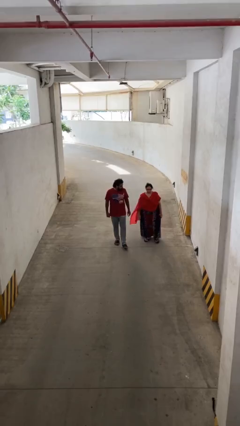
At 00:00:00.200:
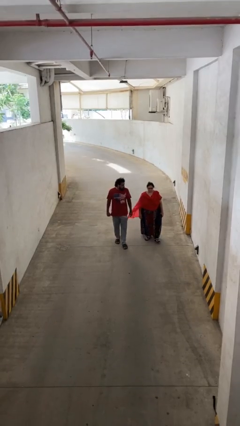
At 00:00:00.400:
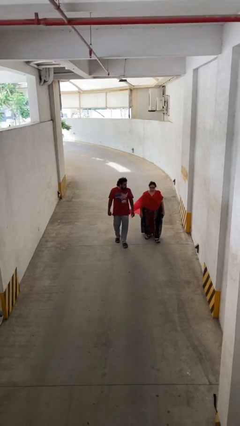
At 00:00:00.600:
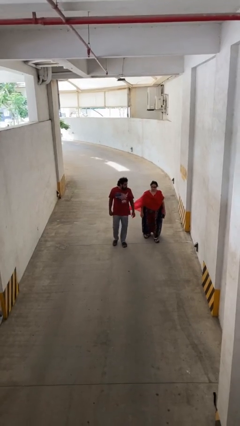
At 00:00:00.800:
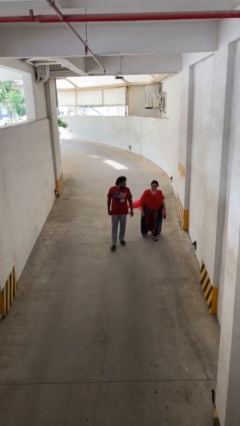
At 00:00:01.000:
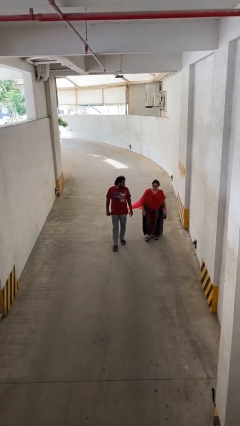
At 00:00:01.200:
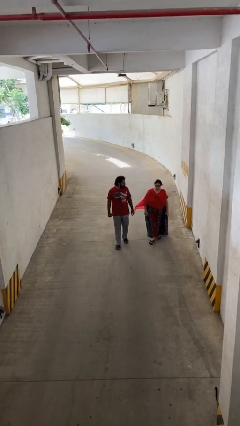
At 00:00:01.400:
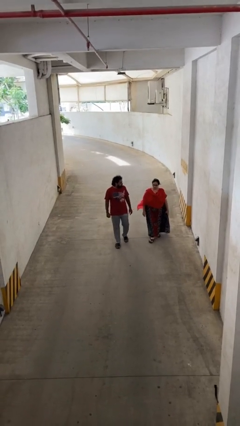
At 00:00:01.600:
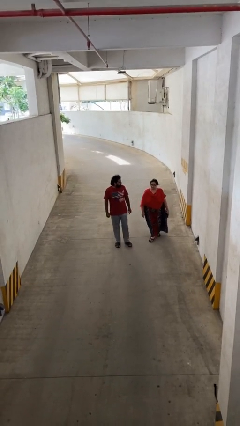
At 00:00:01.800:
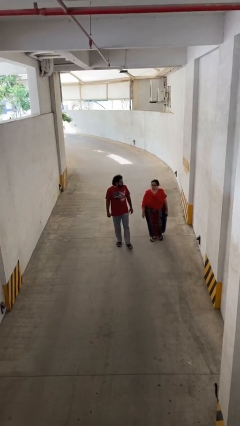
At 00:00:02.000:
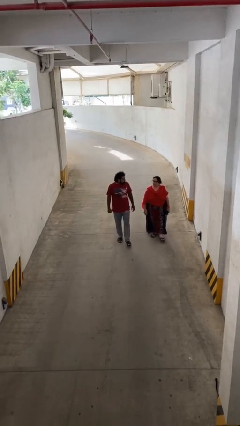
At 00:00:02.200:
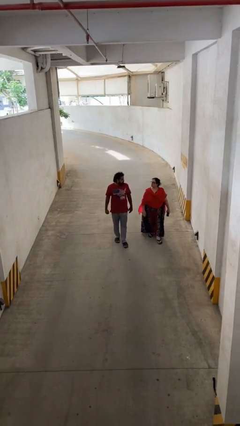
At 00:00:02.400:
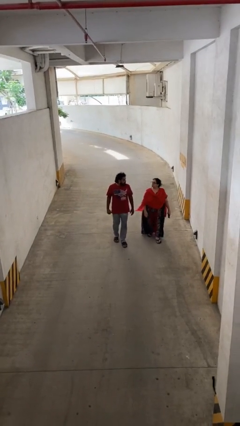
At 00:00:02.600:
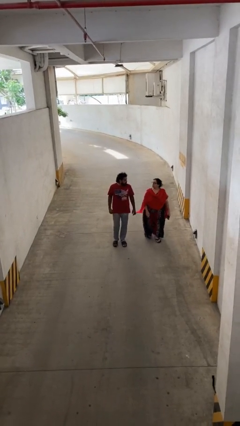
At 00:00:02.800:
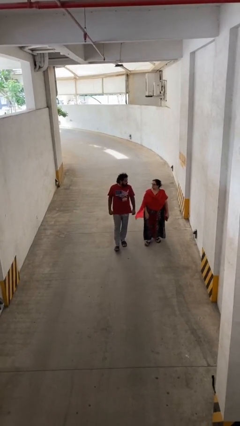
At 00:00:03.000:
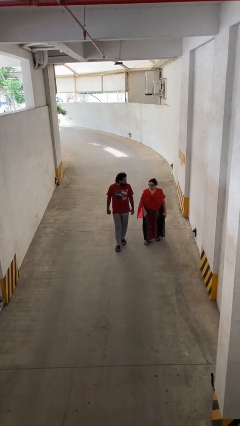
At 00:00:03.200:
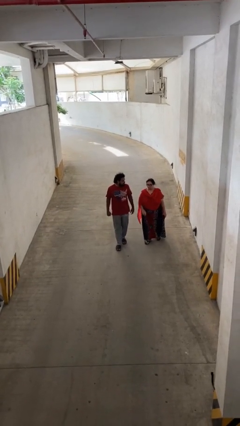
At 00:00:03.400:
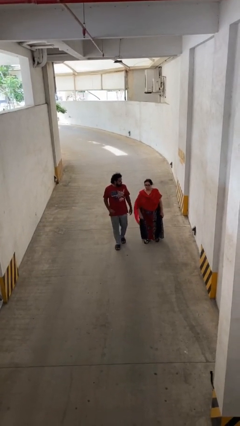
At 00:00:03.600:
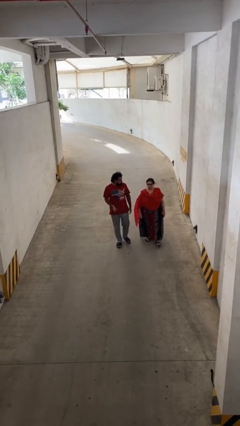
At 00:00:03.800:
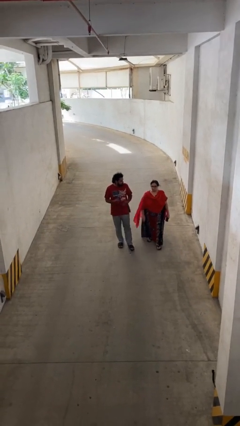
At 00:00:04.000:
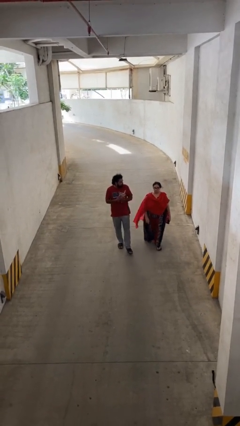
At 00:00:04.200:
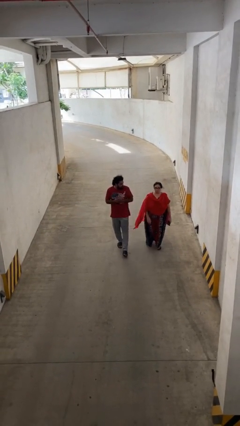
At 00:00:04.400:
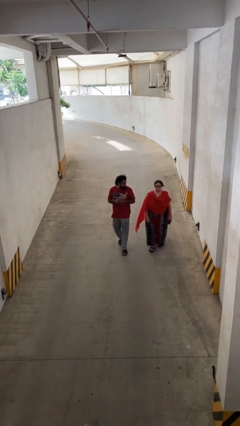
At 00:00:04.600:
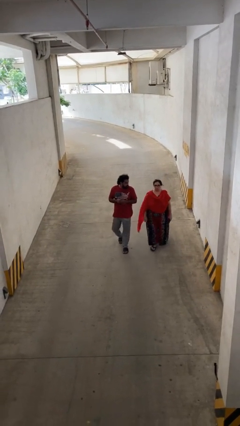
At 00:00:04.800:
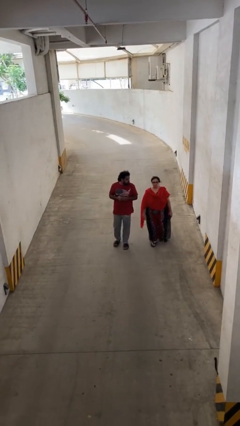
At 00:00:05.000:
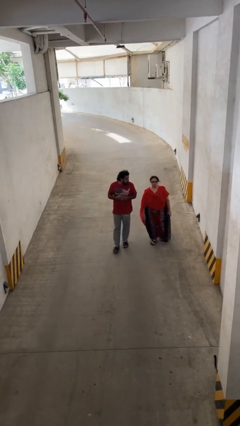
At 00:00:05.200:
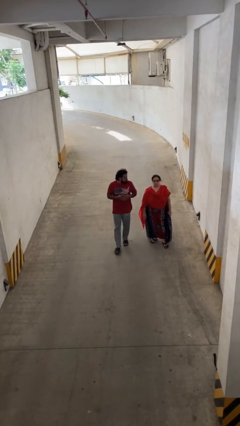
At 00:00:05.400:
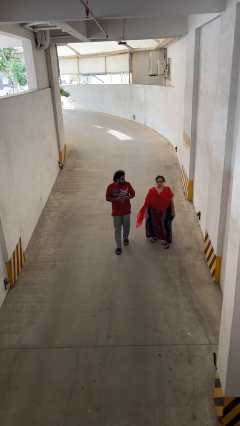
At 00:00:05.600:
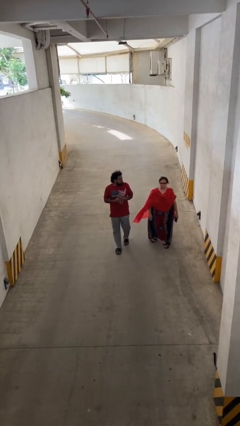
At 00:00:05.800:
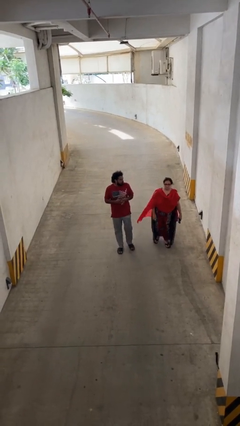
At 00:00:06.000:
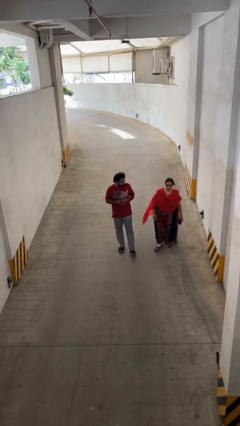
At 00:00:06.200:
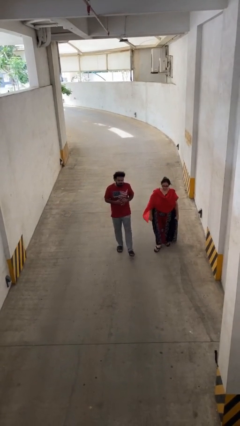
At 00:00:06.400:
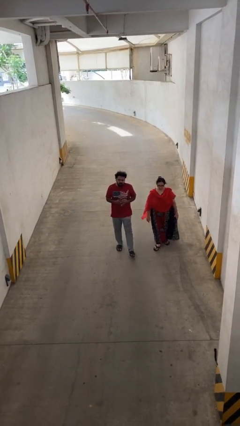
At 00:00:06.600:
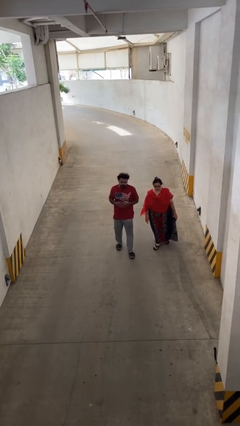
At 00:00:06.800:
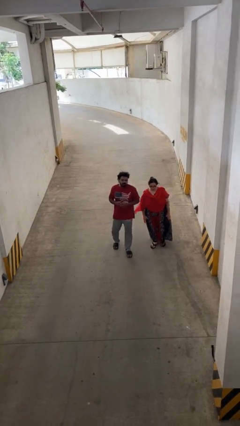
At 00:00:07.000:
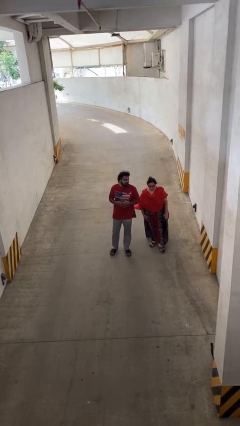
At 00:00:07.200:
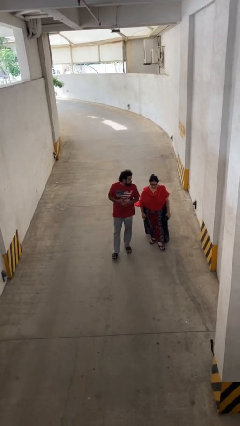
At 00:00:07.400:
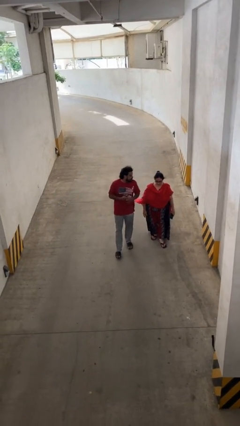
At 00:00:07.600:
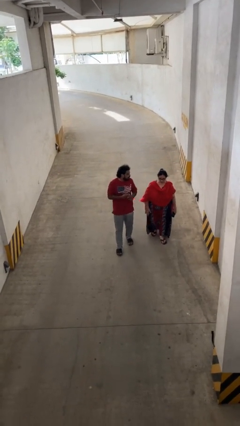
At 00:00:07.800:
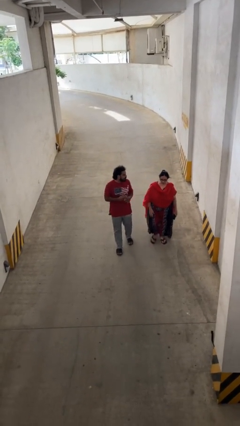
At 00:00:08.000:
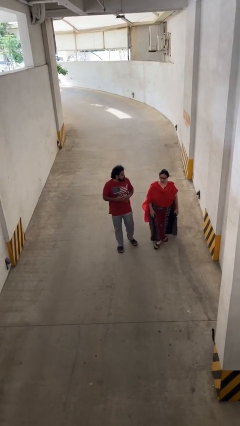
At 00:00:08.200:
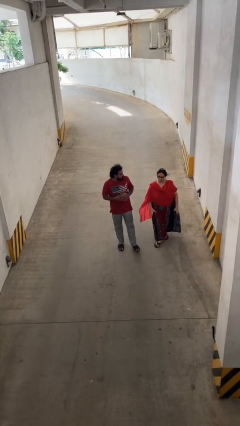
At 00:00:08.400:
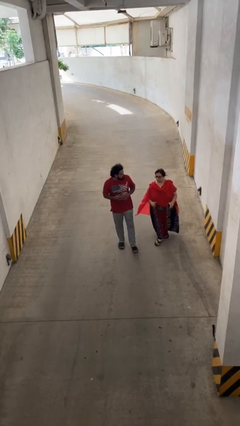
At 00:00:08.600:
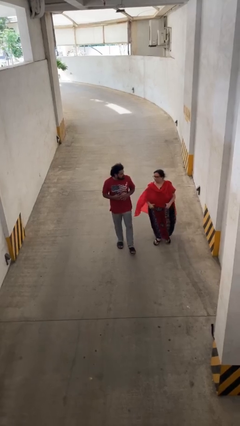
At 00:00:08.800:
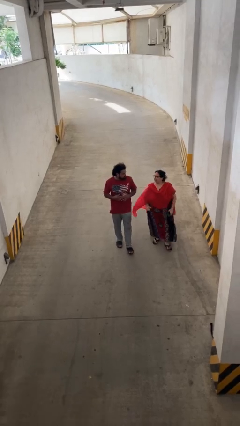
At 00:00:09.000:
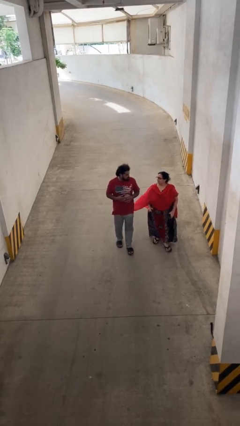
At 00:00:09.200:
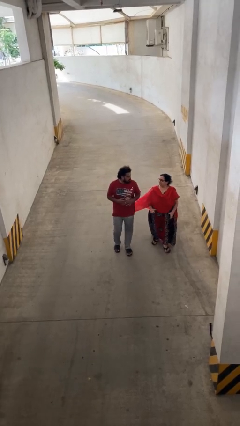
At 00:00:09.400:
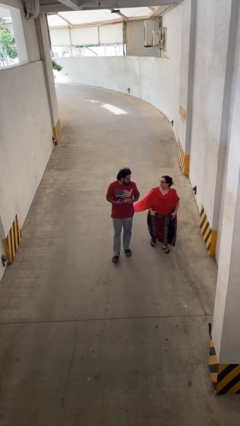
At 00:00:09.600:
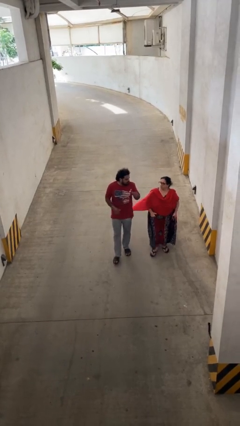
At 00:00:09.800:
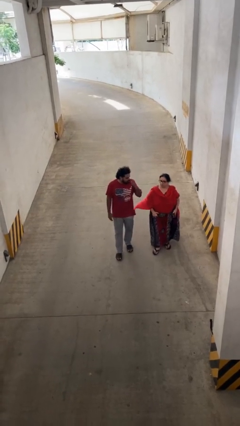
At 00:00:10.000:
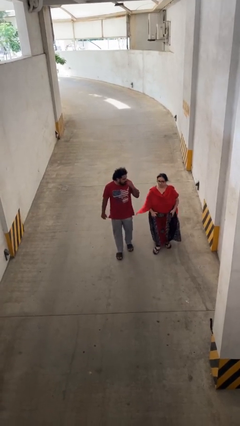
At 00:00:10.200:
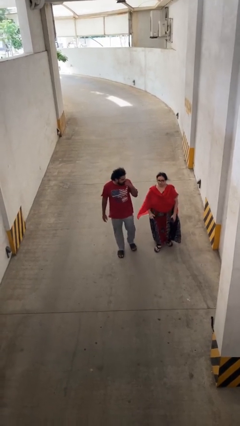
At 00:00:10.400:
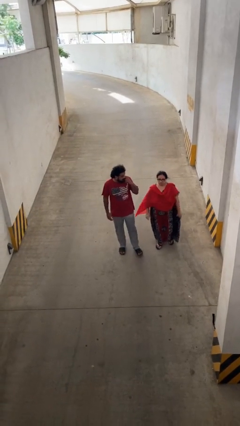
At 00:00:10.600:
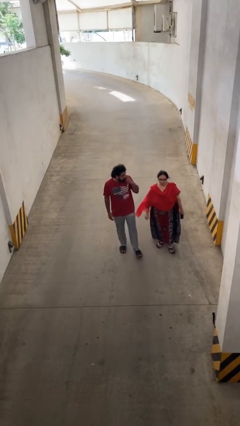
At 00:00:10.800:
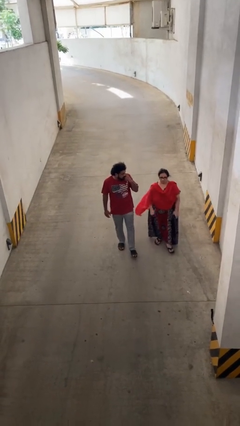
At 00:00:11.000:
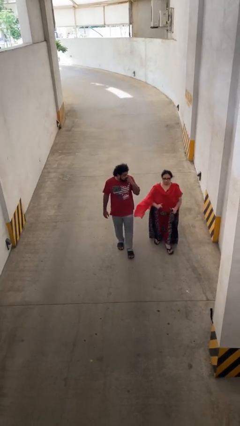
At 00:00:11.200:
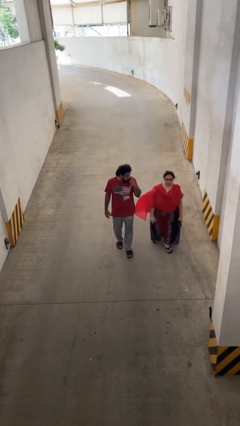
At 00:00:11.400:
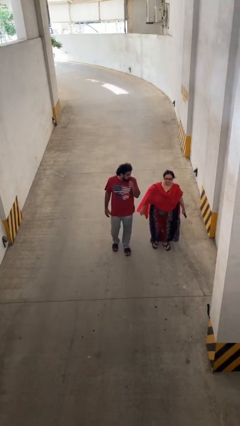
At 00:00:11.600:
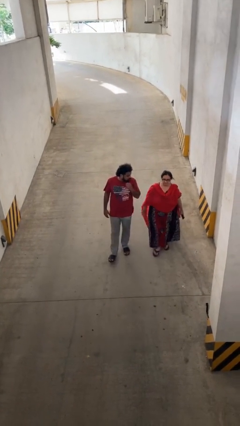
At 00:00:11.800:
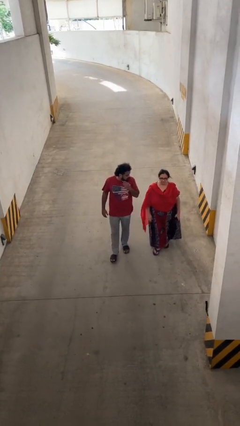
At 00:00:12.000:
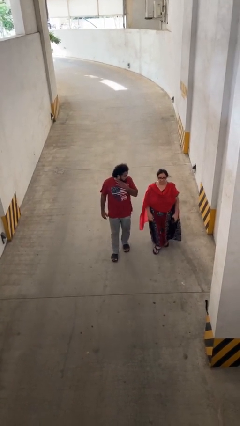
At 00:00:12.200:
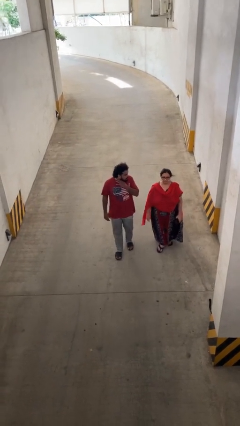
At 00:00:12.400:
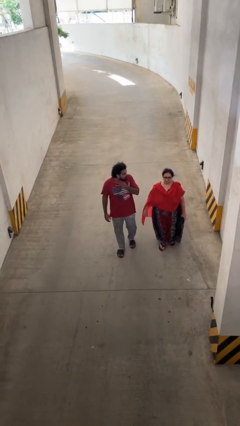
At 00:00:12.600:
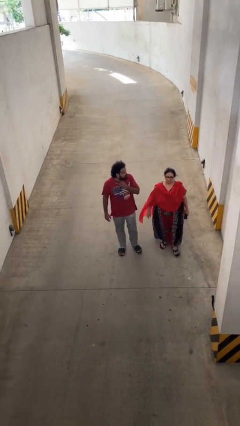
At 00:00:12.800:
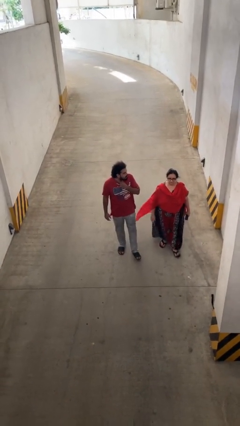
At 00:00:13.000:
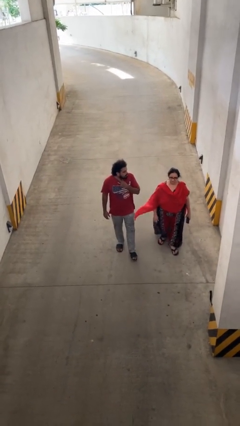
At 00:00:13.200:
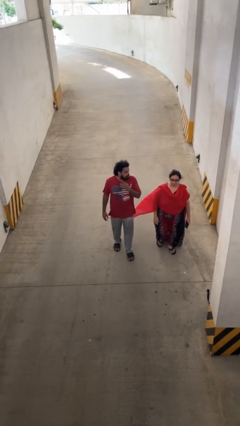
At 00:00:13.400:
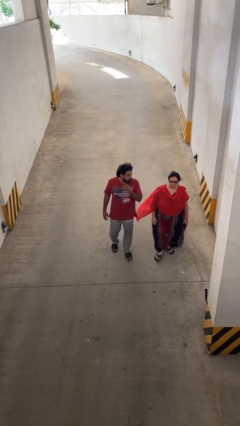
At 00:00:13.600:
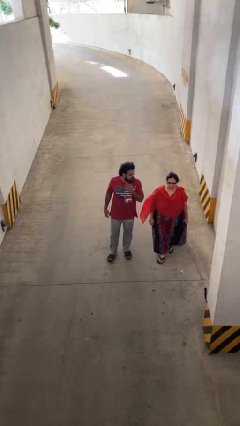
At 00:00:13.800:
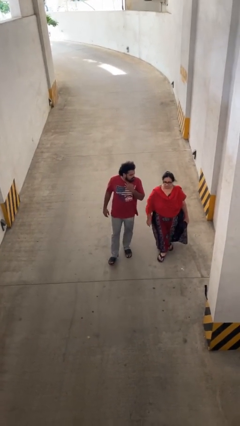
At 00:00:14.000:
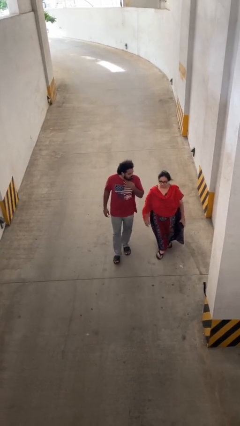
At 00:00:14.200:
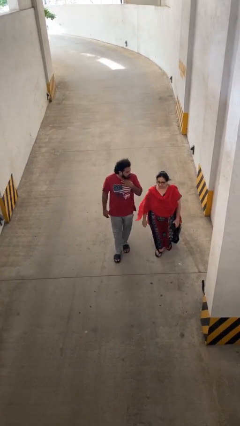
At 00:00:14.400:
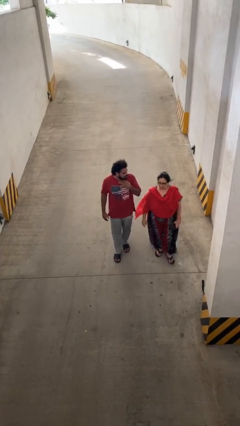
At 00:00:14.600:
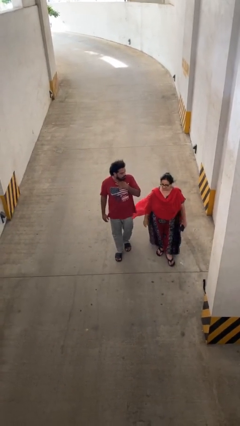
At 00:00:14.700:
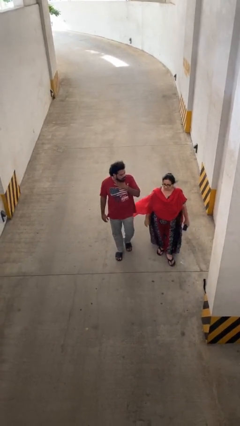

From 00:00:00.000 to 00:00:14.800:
person talks to person

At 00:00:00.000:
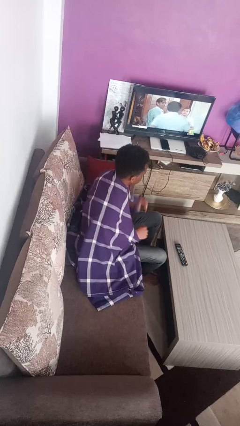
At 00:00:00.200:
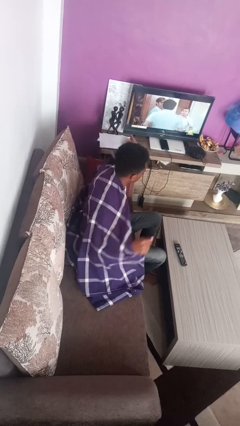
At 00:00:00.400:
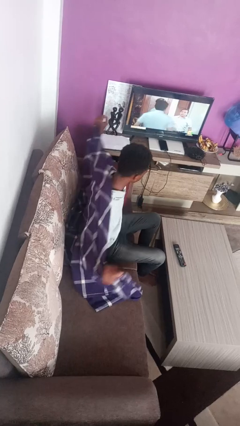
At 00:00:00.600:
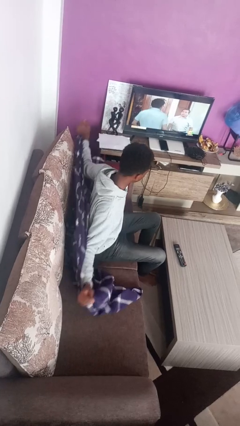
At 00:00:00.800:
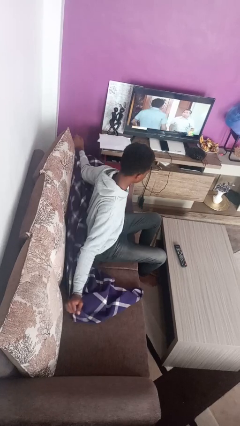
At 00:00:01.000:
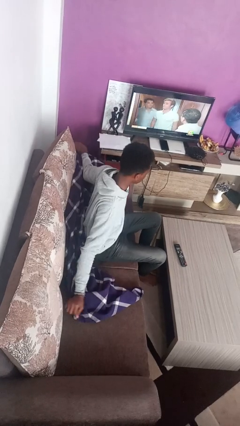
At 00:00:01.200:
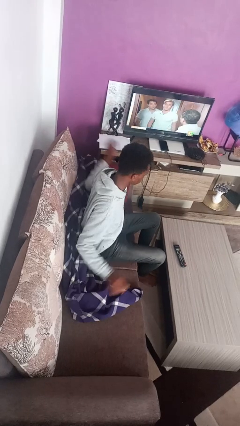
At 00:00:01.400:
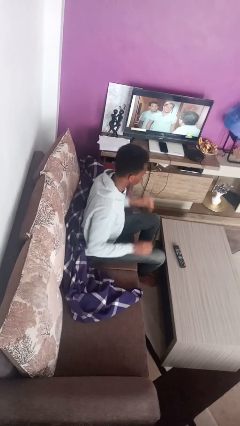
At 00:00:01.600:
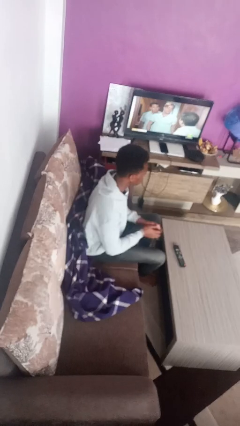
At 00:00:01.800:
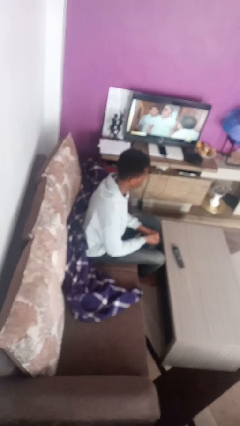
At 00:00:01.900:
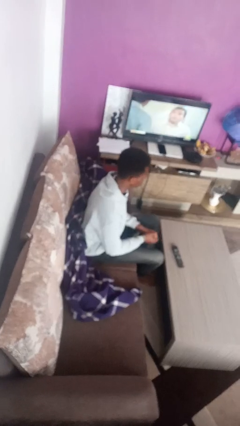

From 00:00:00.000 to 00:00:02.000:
person uncovers with blanket

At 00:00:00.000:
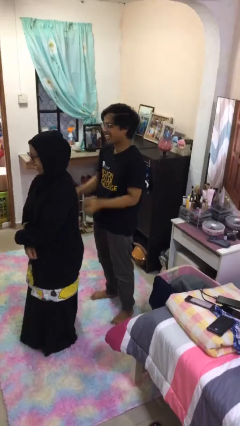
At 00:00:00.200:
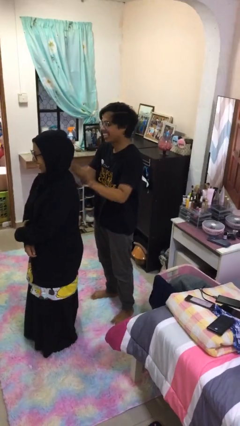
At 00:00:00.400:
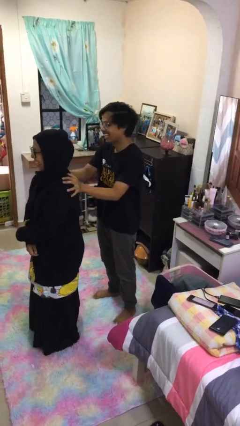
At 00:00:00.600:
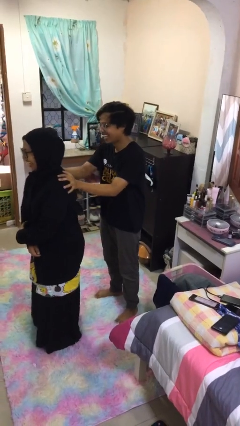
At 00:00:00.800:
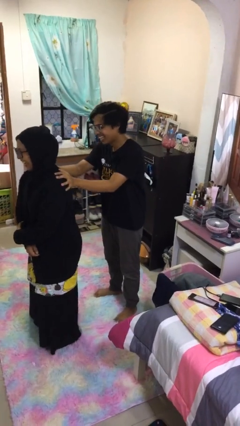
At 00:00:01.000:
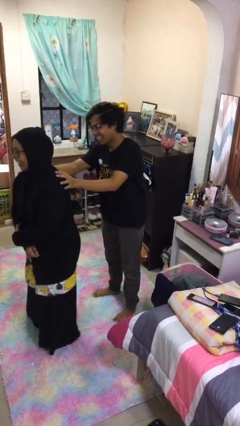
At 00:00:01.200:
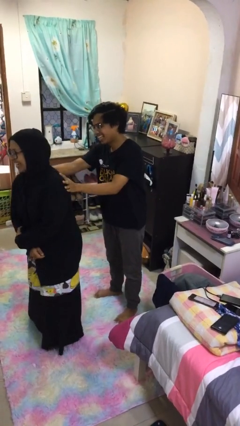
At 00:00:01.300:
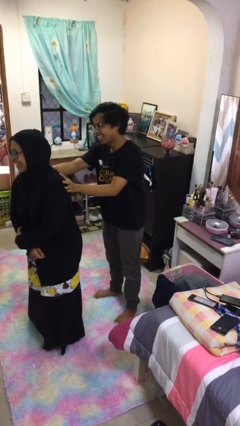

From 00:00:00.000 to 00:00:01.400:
person grabs person by shoulder
